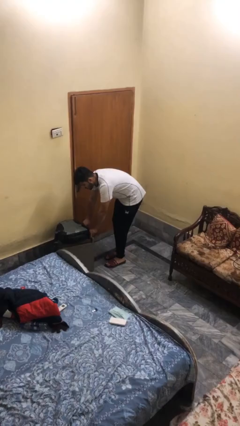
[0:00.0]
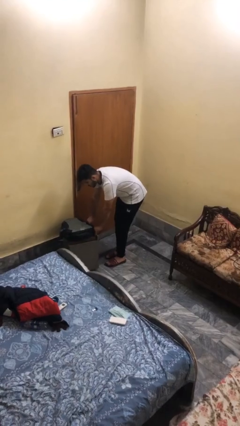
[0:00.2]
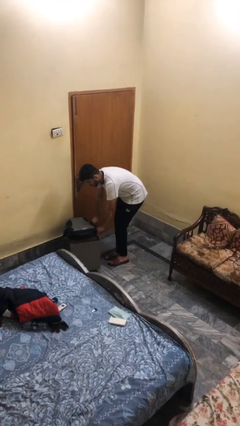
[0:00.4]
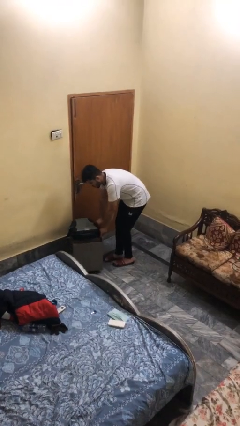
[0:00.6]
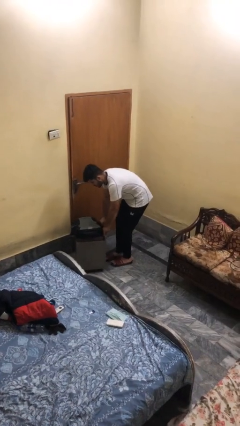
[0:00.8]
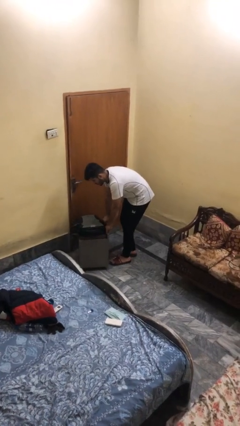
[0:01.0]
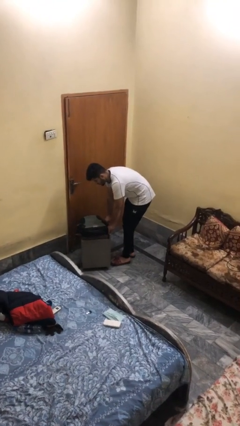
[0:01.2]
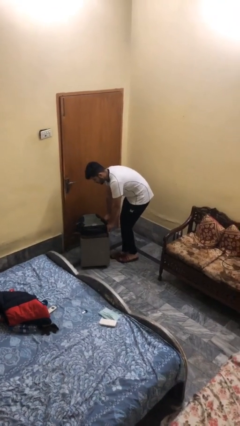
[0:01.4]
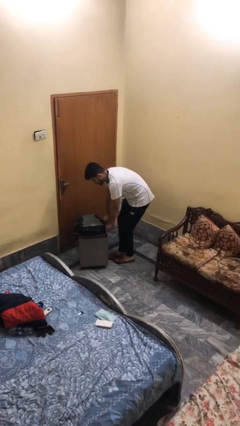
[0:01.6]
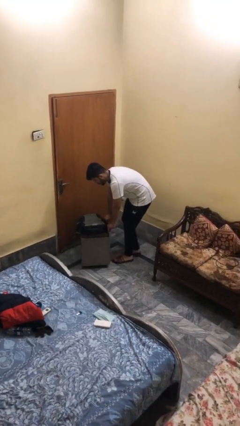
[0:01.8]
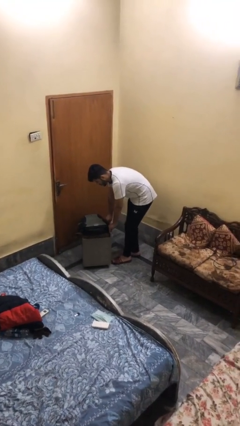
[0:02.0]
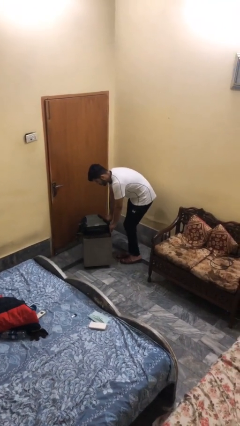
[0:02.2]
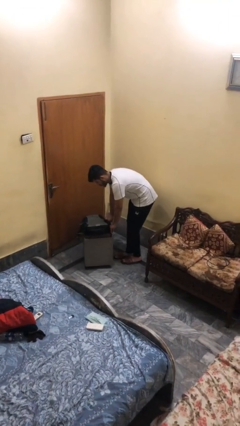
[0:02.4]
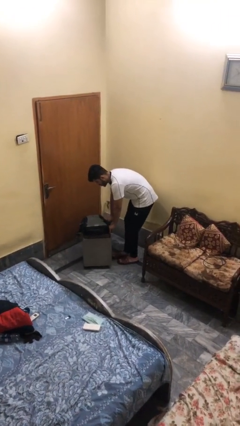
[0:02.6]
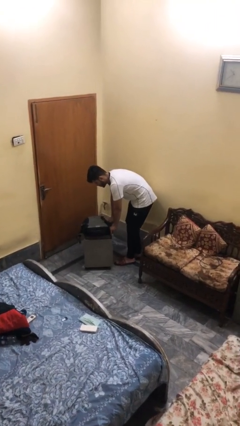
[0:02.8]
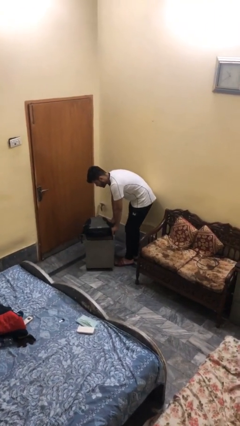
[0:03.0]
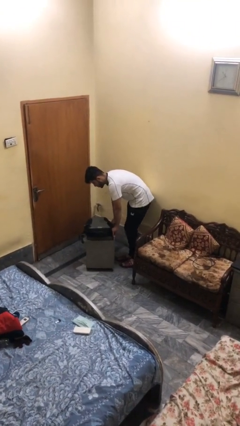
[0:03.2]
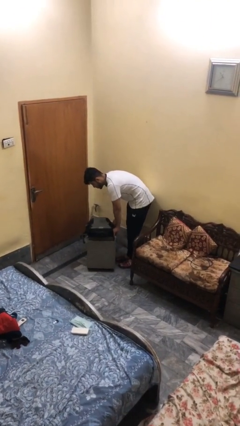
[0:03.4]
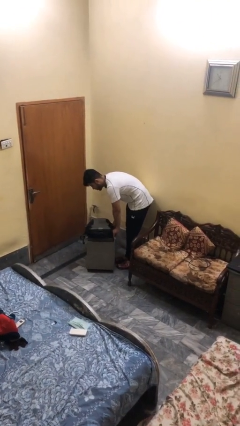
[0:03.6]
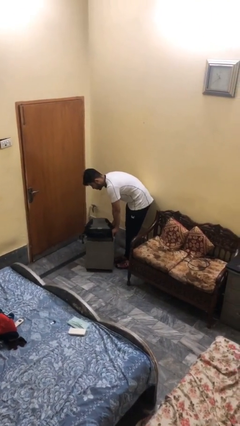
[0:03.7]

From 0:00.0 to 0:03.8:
person pulls wheeled cart

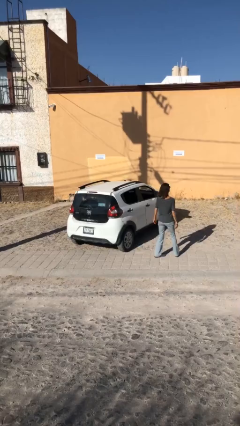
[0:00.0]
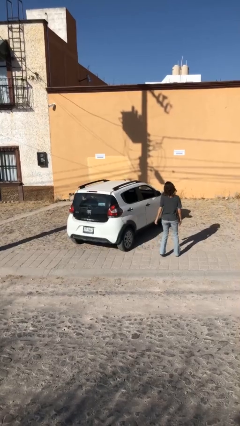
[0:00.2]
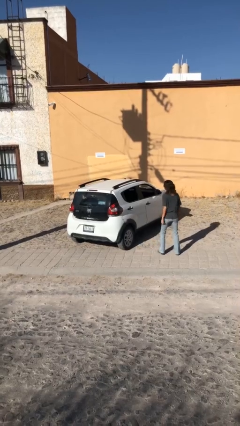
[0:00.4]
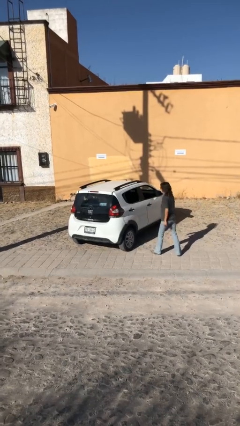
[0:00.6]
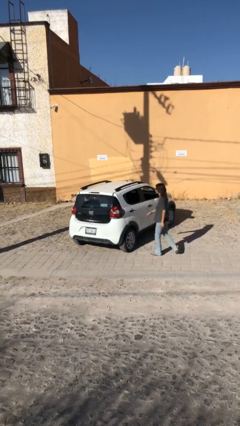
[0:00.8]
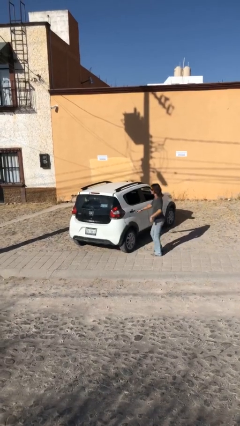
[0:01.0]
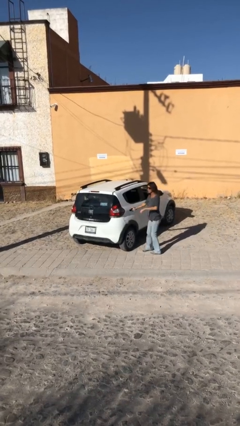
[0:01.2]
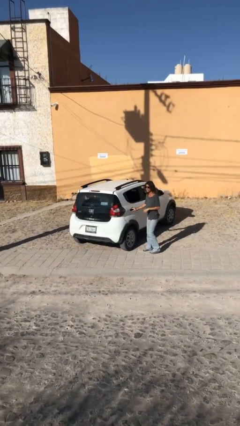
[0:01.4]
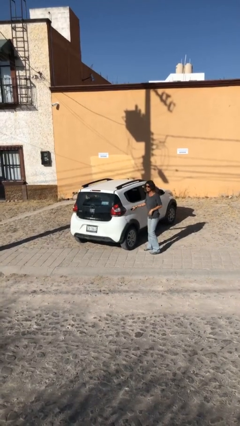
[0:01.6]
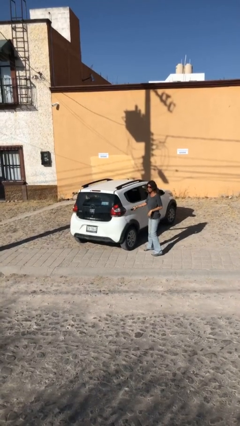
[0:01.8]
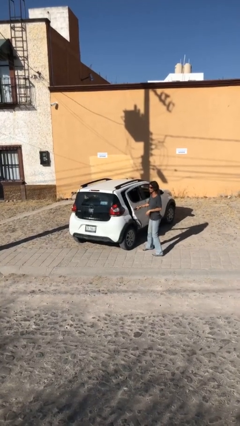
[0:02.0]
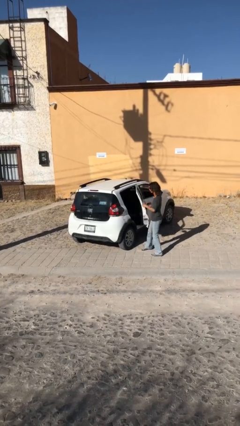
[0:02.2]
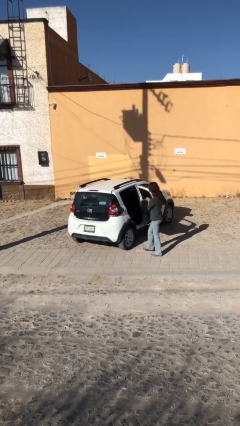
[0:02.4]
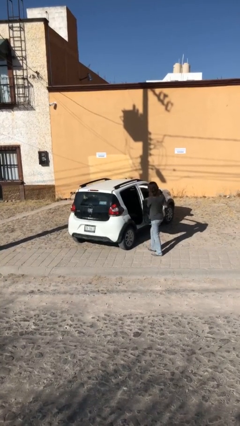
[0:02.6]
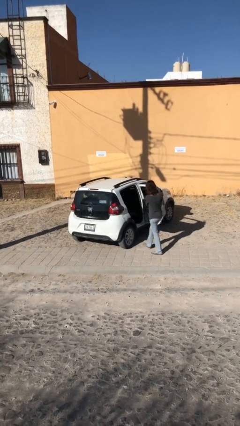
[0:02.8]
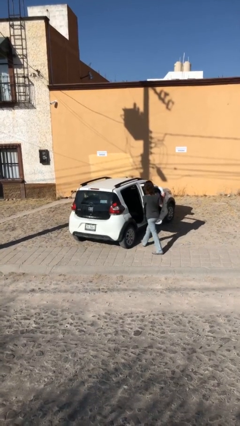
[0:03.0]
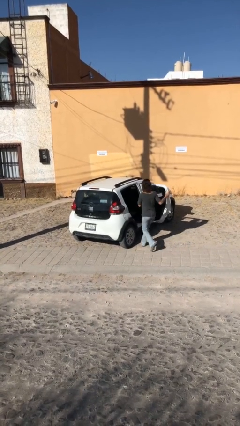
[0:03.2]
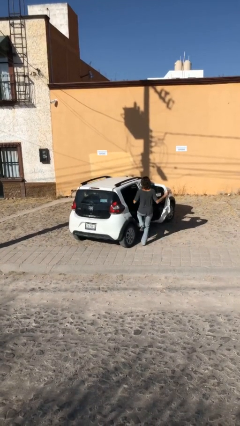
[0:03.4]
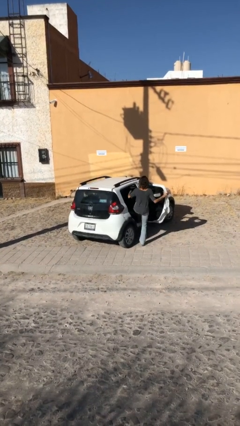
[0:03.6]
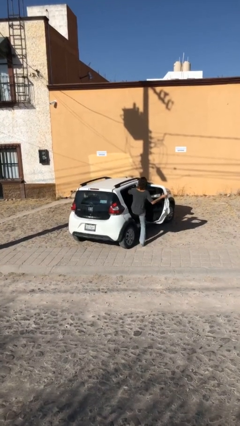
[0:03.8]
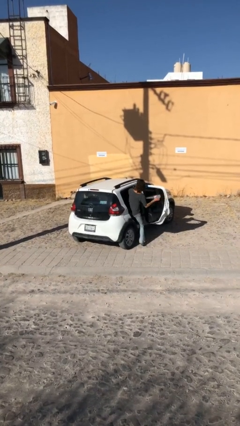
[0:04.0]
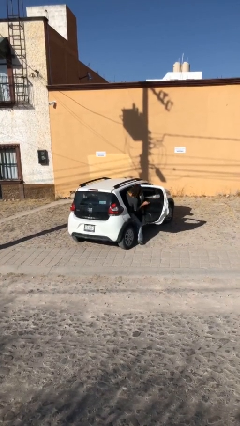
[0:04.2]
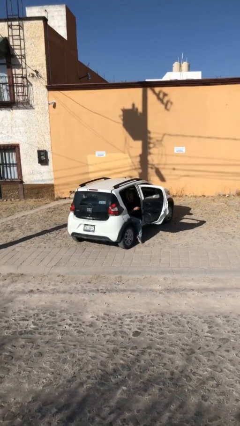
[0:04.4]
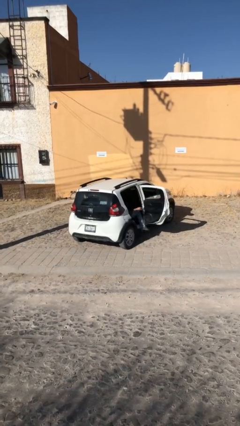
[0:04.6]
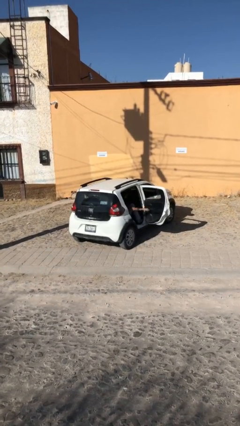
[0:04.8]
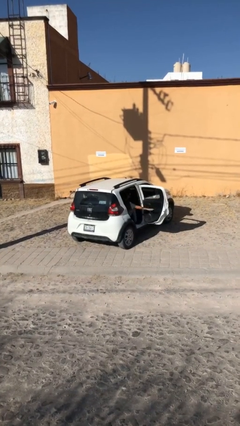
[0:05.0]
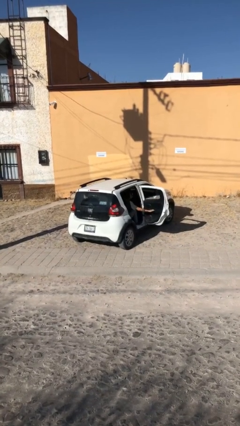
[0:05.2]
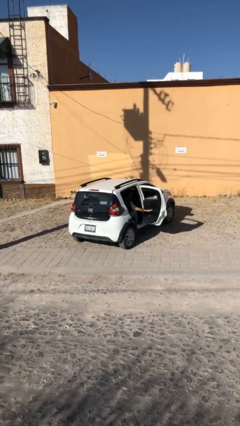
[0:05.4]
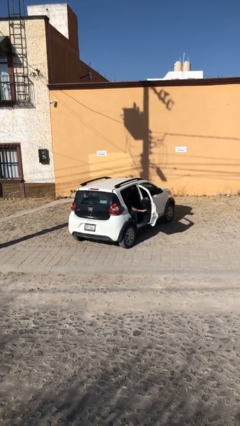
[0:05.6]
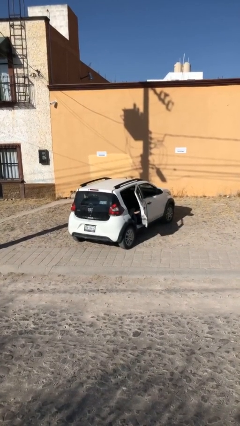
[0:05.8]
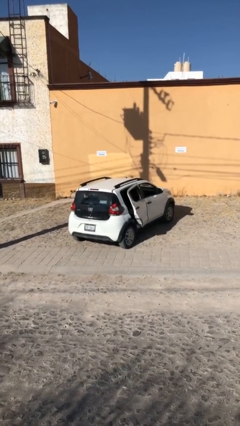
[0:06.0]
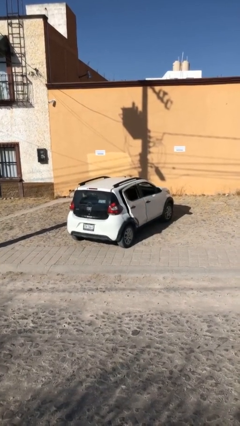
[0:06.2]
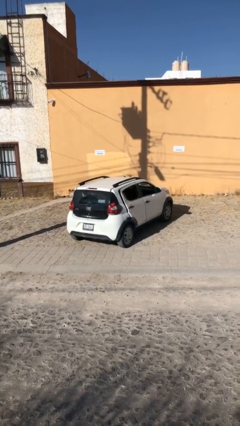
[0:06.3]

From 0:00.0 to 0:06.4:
car picks up person

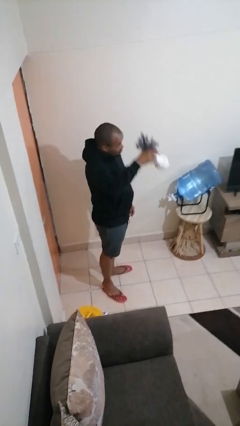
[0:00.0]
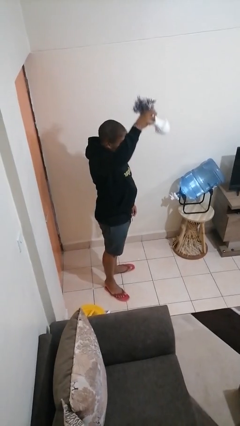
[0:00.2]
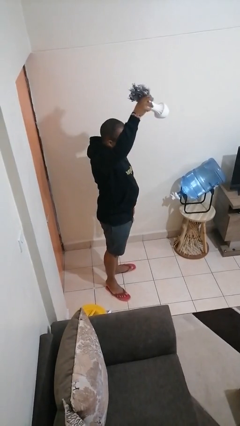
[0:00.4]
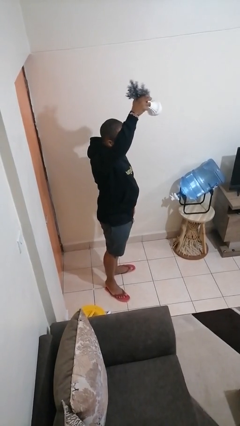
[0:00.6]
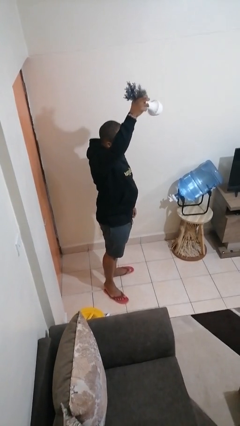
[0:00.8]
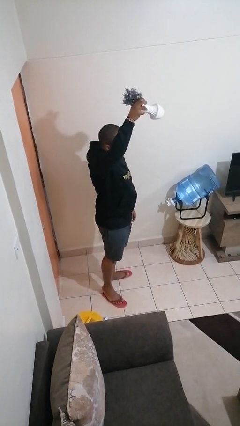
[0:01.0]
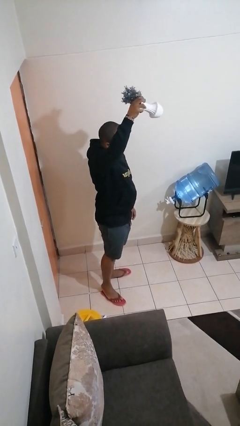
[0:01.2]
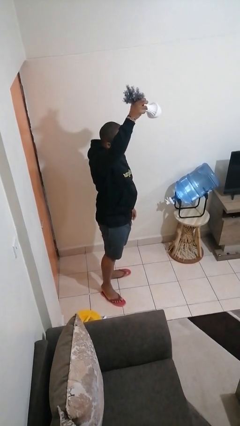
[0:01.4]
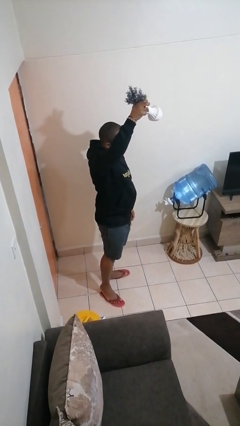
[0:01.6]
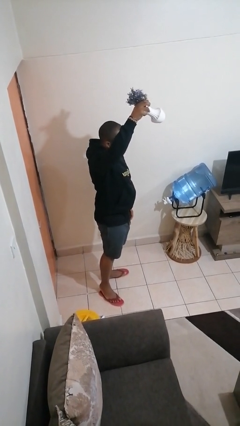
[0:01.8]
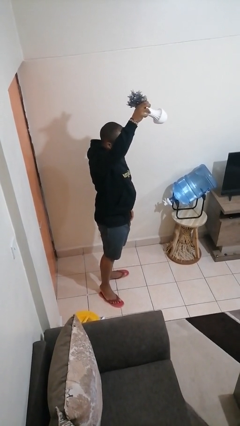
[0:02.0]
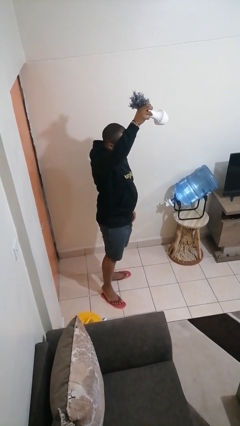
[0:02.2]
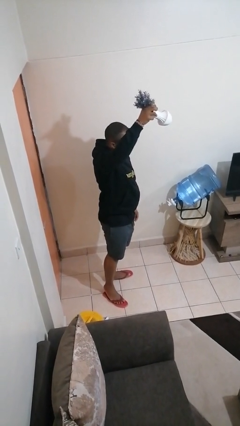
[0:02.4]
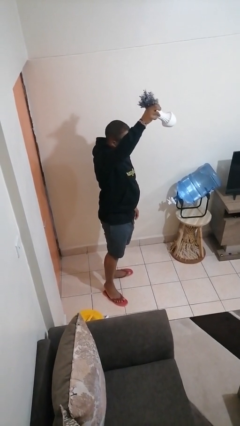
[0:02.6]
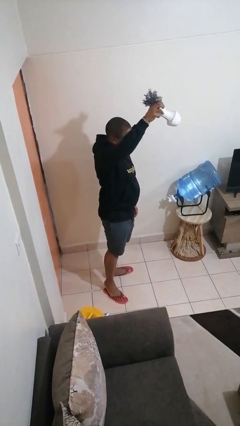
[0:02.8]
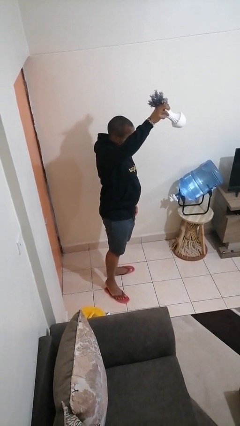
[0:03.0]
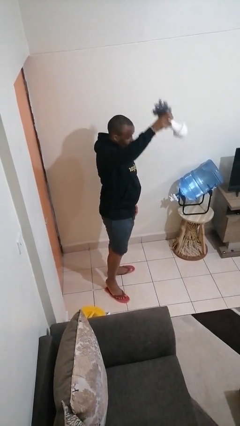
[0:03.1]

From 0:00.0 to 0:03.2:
person holds object above head

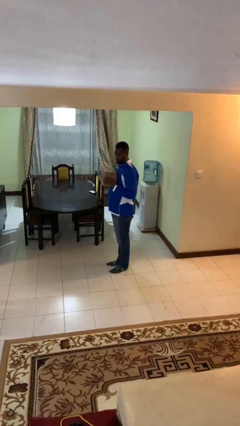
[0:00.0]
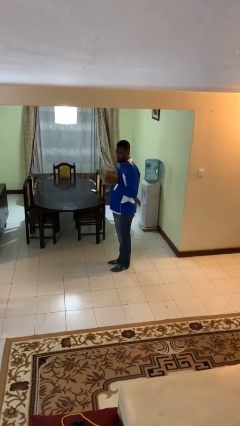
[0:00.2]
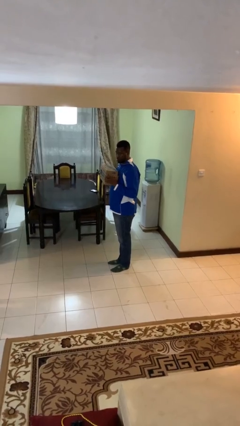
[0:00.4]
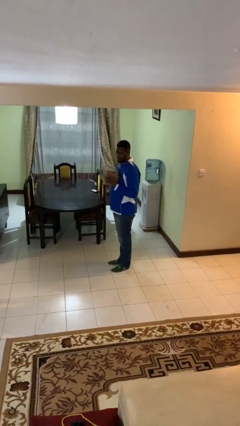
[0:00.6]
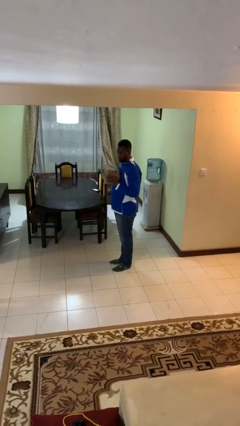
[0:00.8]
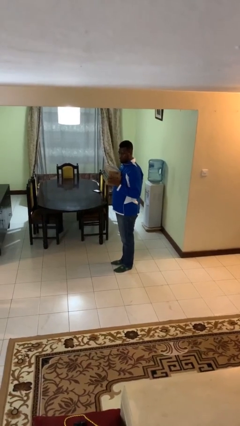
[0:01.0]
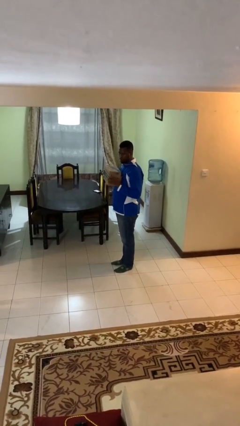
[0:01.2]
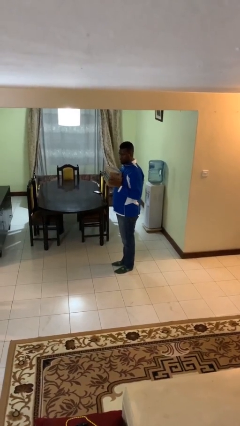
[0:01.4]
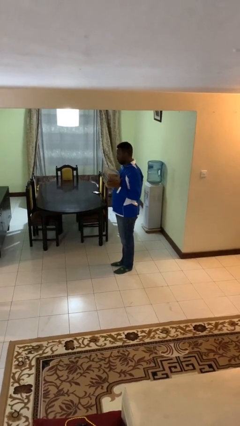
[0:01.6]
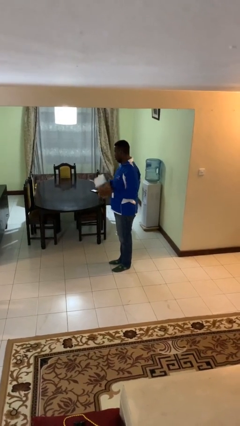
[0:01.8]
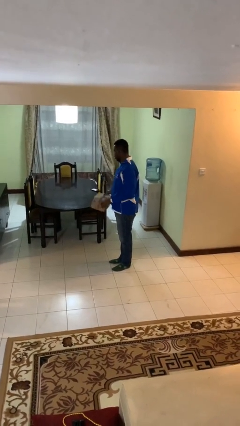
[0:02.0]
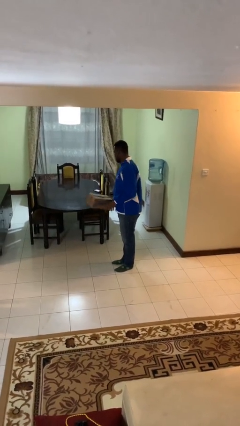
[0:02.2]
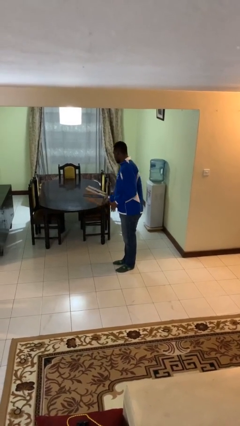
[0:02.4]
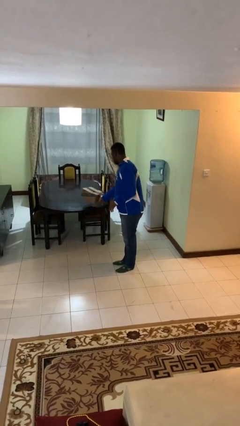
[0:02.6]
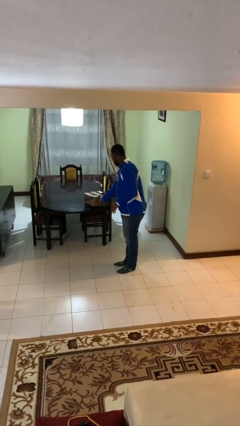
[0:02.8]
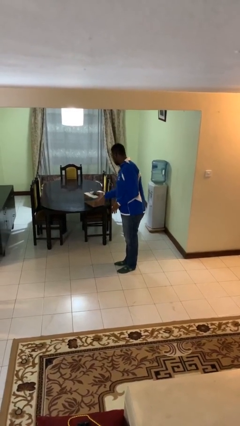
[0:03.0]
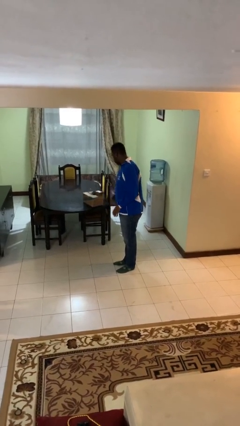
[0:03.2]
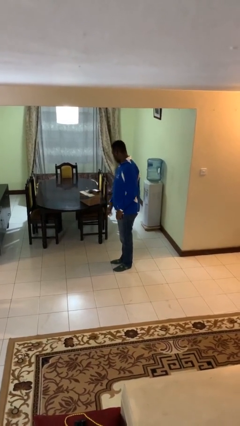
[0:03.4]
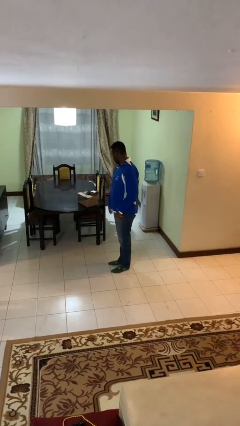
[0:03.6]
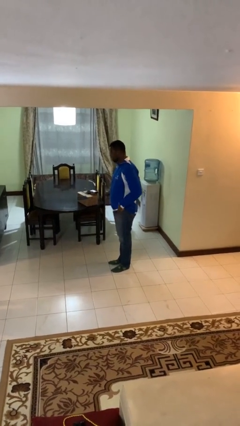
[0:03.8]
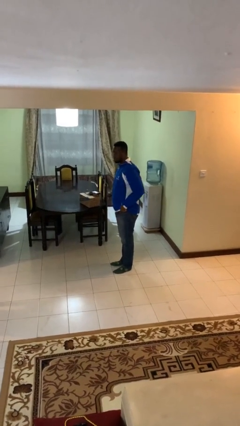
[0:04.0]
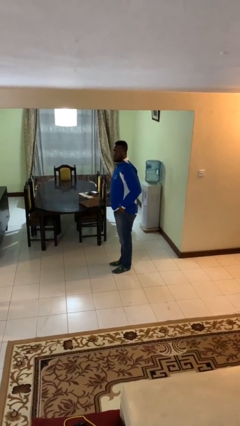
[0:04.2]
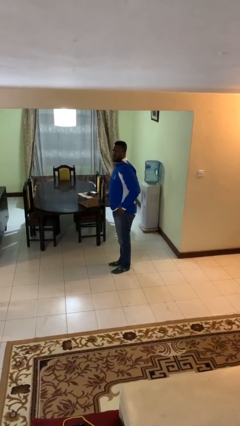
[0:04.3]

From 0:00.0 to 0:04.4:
person puts down object on table

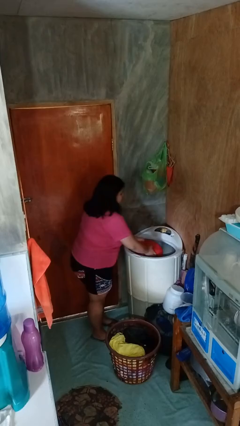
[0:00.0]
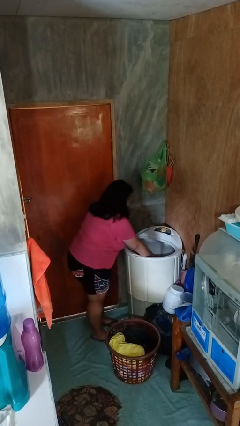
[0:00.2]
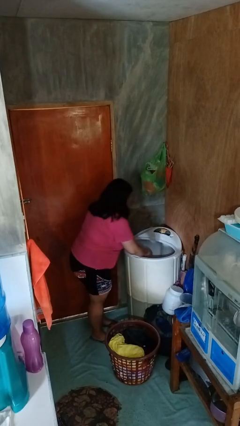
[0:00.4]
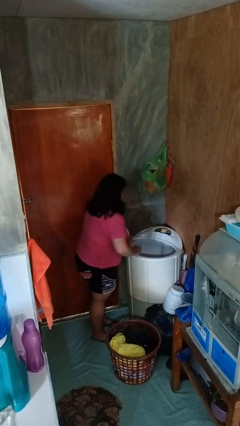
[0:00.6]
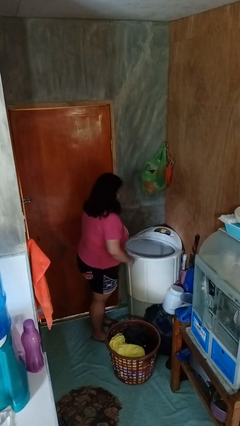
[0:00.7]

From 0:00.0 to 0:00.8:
person loads dryer
